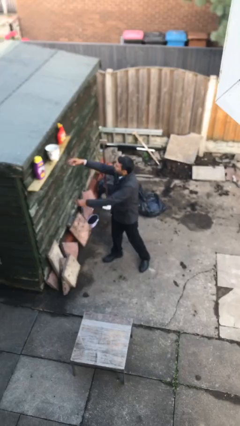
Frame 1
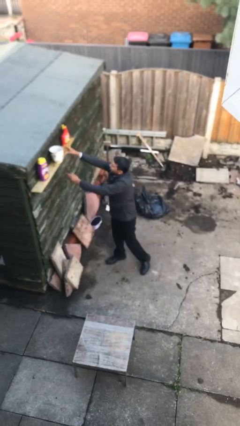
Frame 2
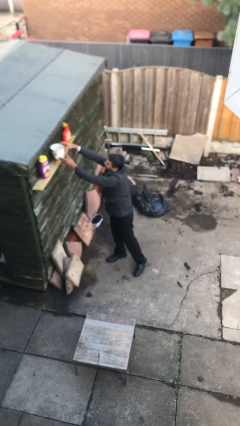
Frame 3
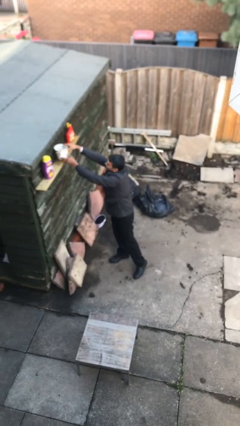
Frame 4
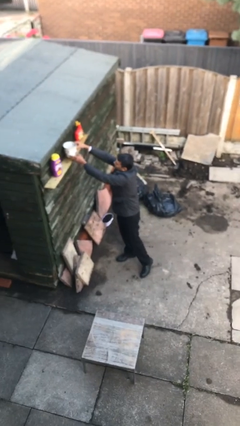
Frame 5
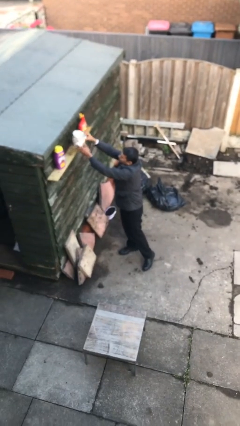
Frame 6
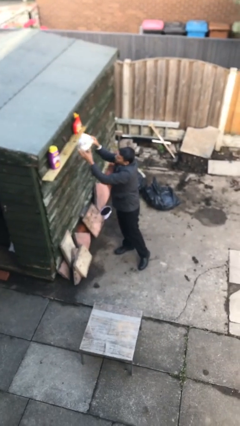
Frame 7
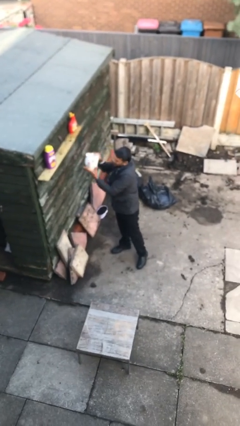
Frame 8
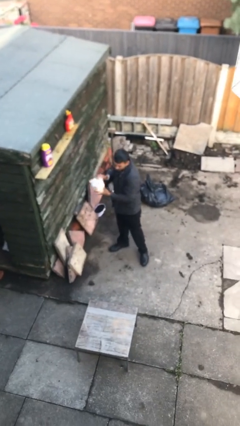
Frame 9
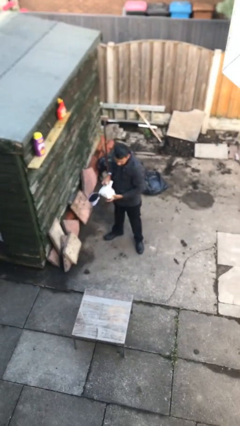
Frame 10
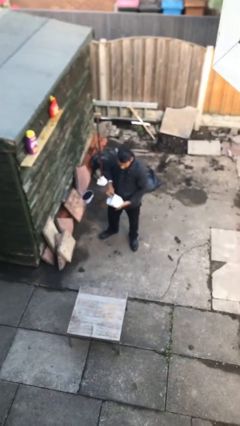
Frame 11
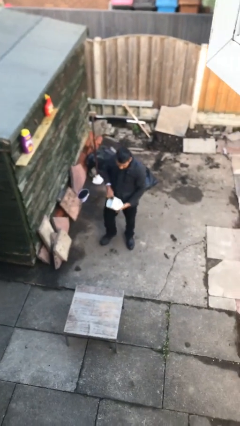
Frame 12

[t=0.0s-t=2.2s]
person picks up object from shelf

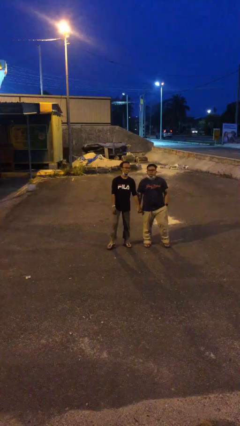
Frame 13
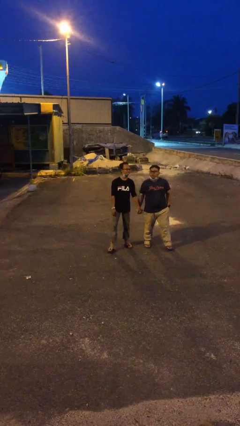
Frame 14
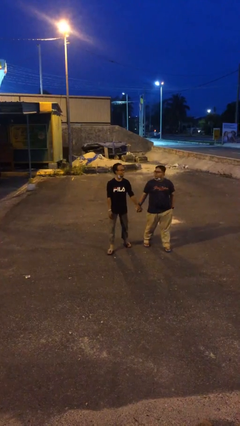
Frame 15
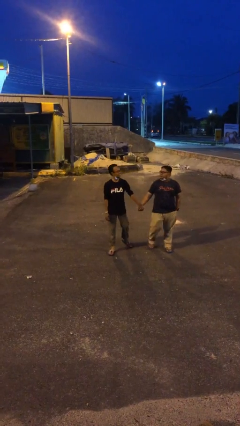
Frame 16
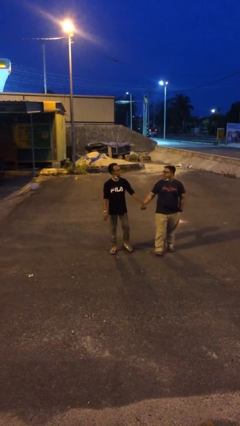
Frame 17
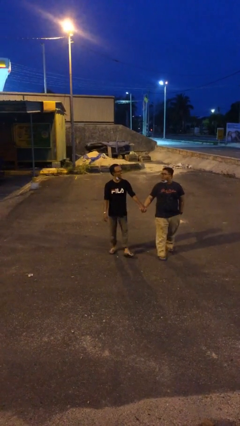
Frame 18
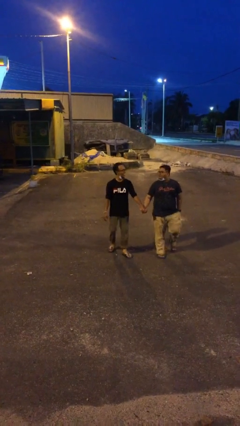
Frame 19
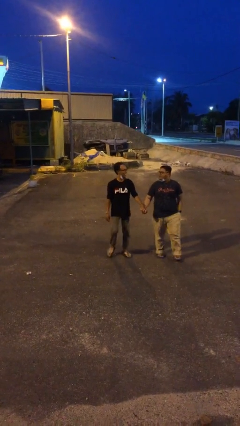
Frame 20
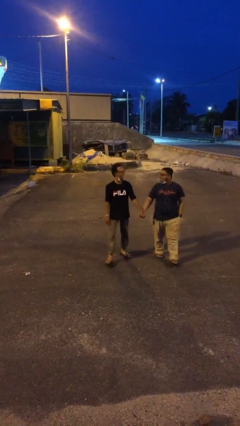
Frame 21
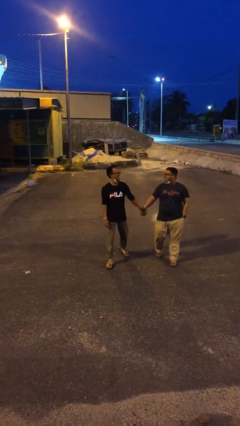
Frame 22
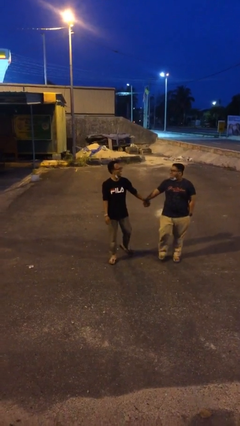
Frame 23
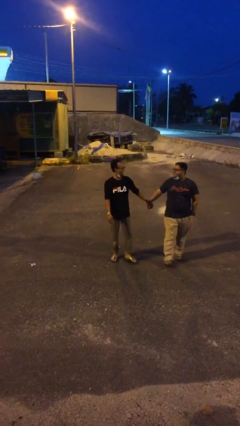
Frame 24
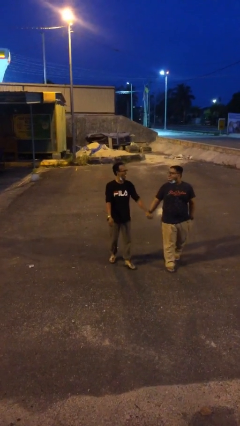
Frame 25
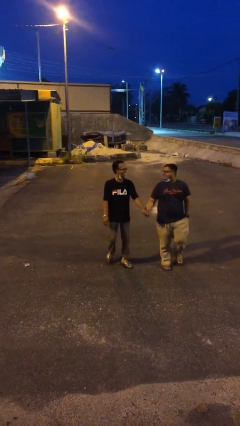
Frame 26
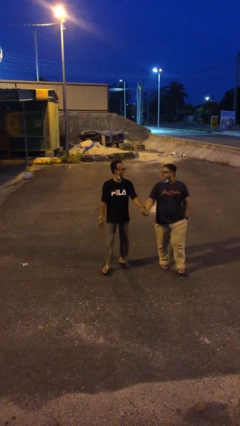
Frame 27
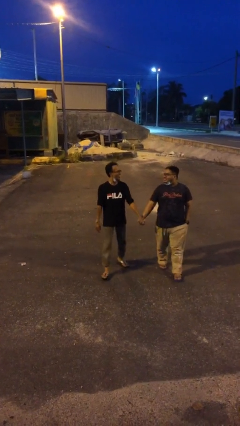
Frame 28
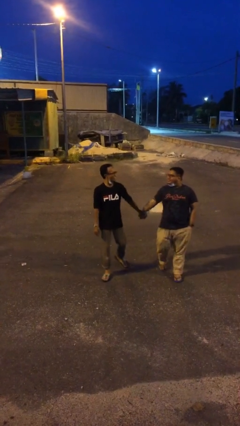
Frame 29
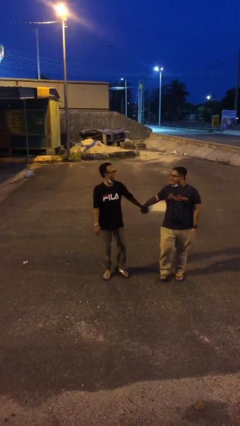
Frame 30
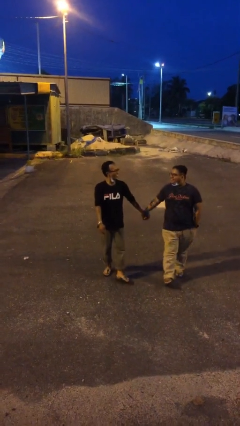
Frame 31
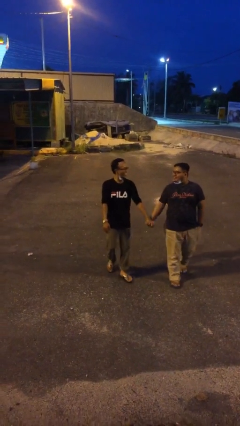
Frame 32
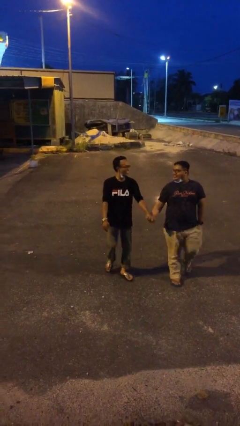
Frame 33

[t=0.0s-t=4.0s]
person holds hand

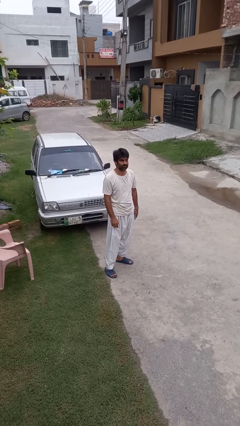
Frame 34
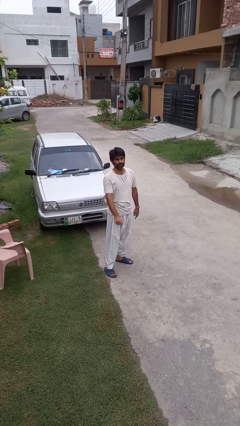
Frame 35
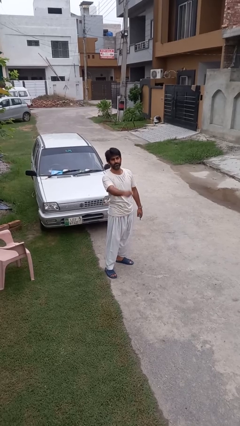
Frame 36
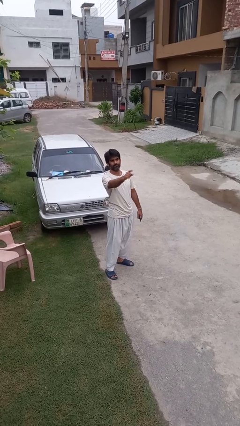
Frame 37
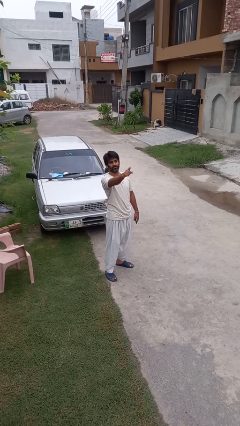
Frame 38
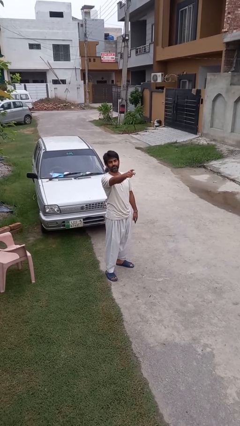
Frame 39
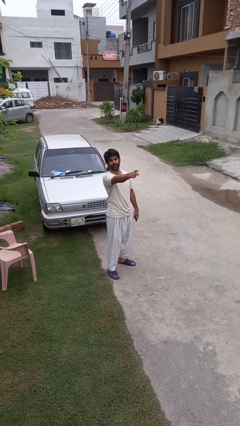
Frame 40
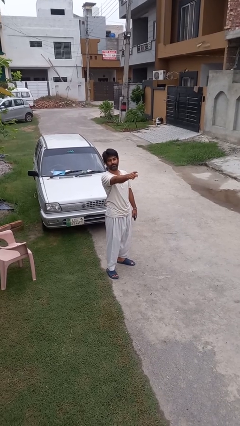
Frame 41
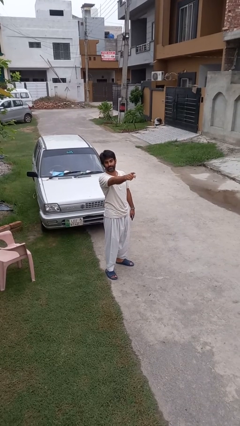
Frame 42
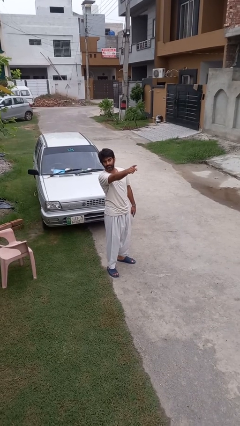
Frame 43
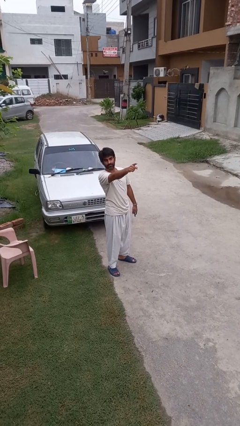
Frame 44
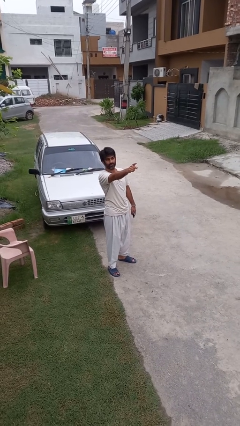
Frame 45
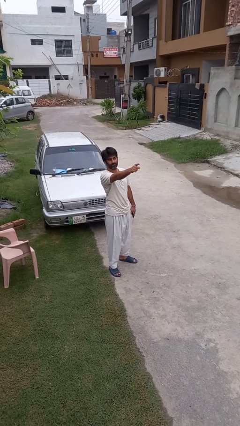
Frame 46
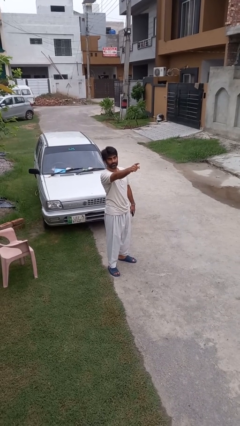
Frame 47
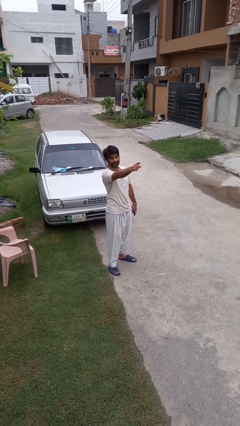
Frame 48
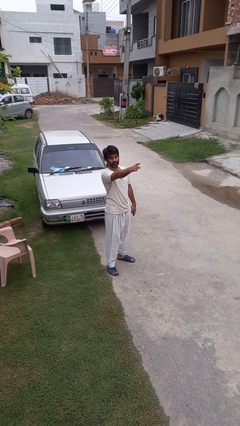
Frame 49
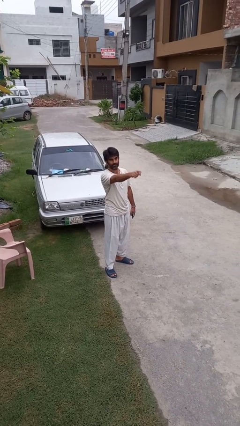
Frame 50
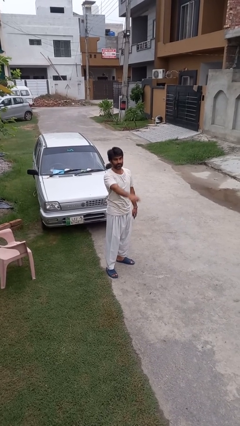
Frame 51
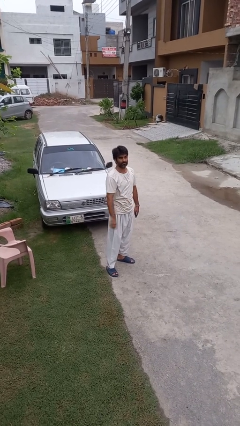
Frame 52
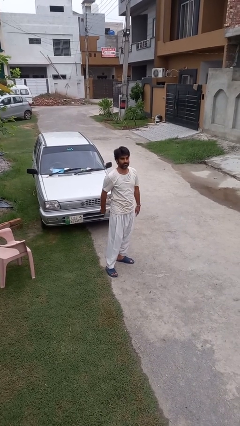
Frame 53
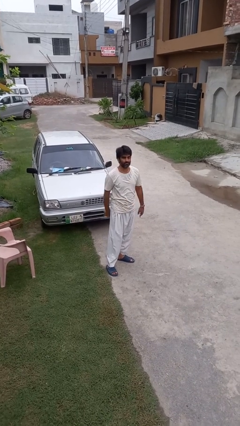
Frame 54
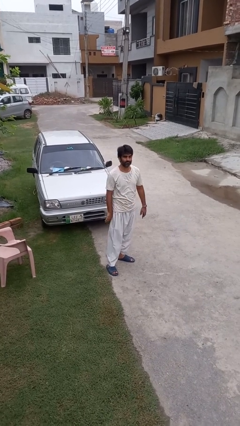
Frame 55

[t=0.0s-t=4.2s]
person points at person

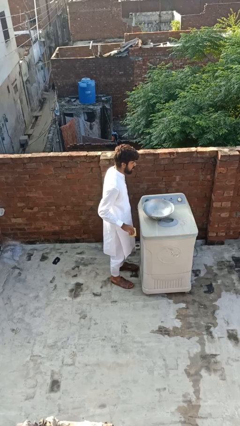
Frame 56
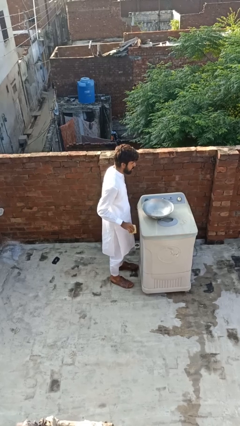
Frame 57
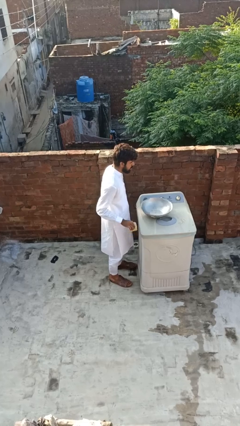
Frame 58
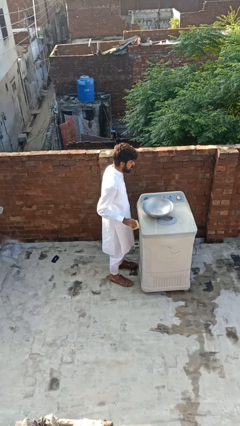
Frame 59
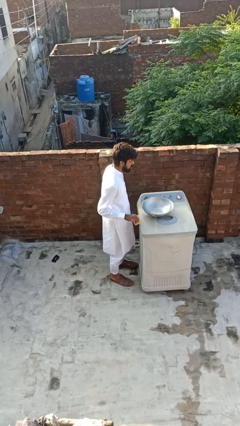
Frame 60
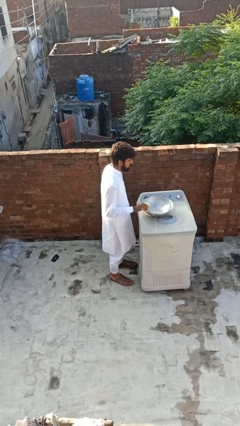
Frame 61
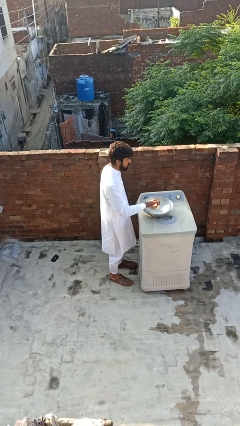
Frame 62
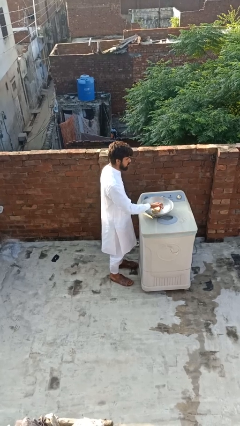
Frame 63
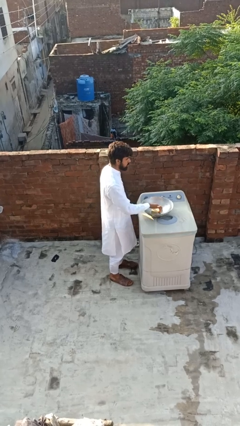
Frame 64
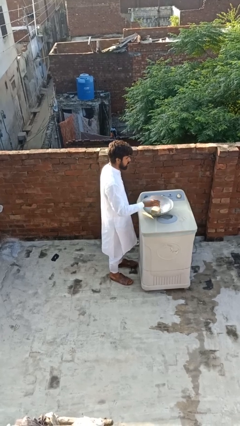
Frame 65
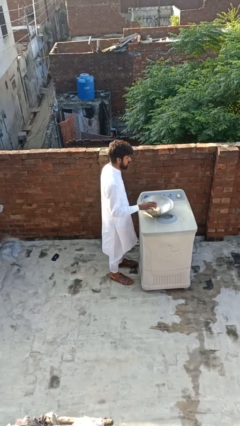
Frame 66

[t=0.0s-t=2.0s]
person pours into bowl

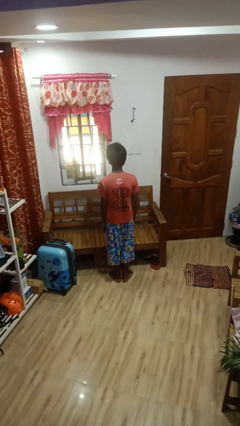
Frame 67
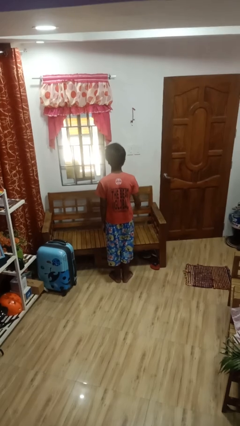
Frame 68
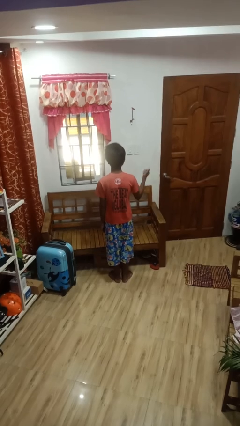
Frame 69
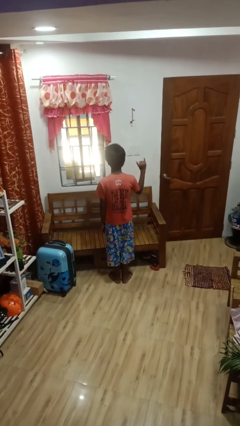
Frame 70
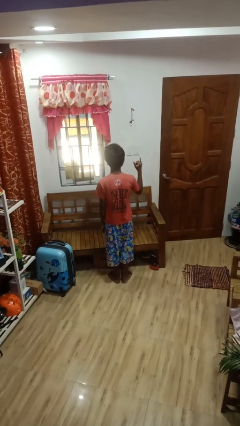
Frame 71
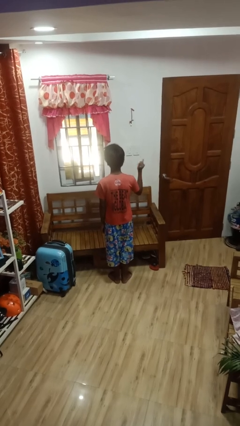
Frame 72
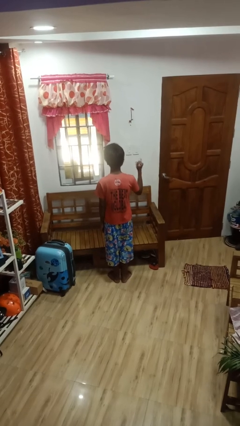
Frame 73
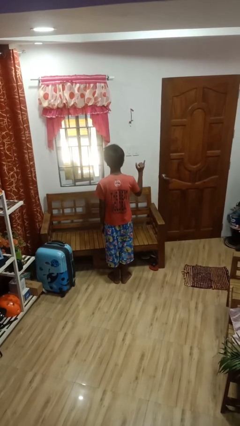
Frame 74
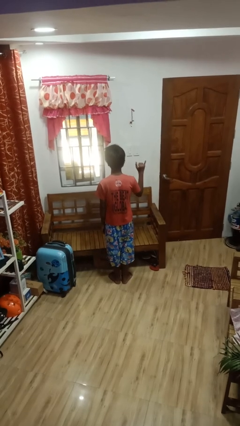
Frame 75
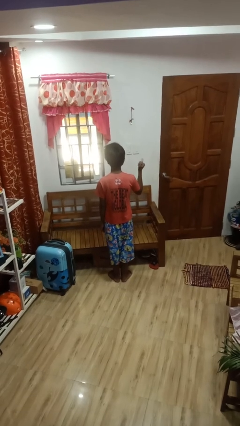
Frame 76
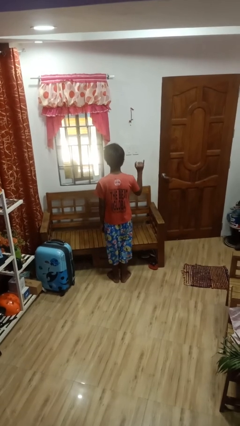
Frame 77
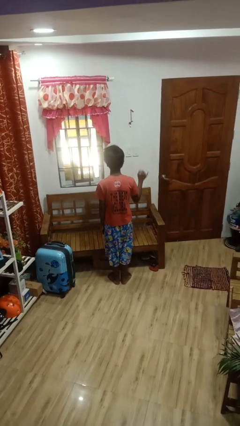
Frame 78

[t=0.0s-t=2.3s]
person gestures hang loose

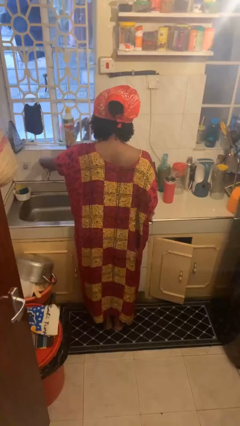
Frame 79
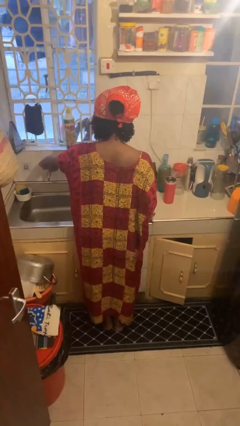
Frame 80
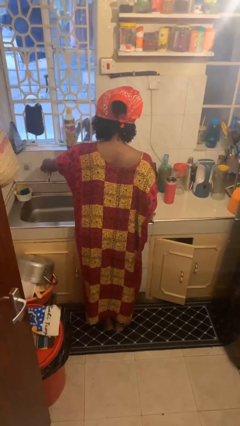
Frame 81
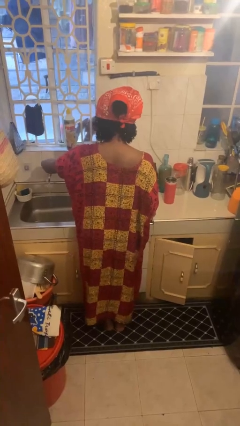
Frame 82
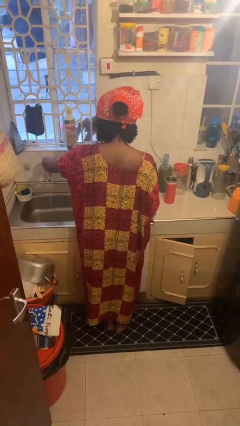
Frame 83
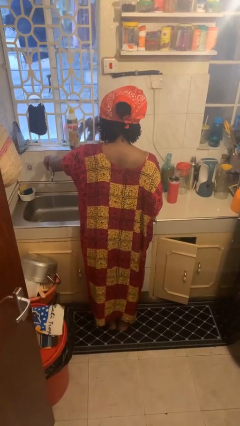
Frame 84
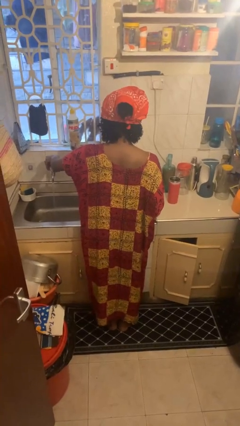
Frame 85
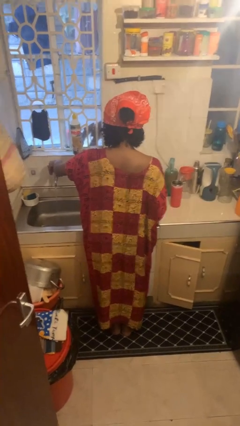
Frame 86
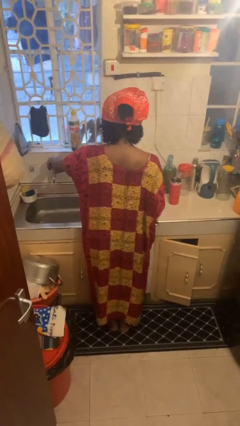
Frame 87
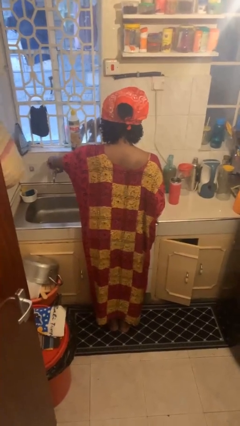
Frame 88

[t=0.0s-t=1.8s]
person turns on faucet

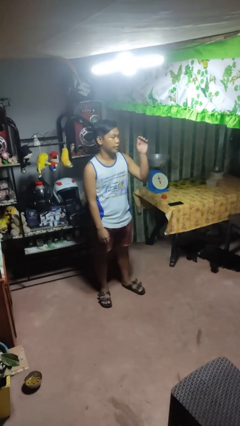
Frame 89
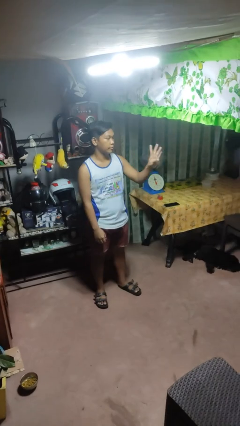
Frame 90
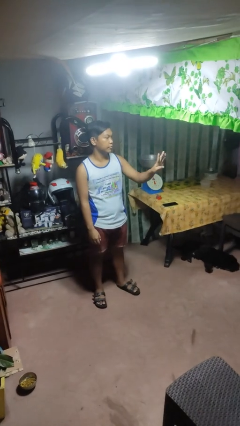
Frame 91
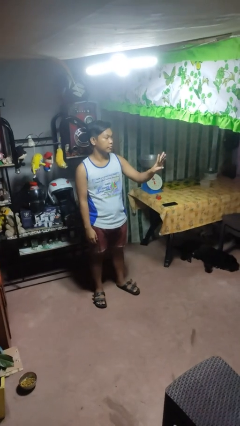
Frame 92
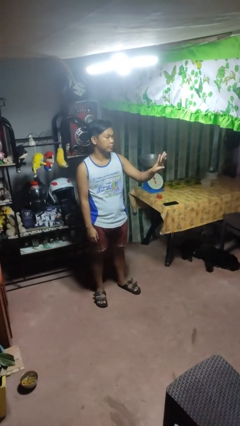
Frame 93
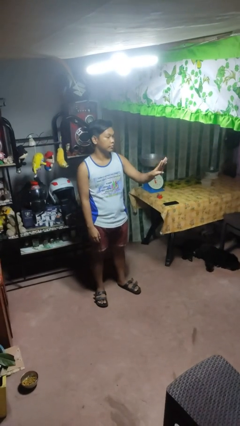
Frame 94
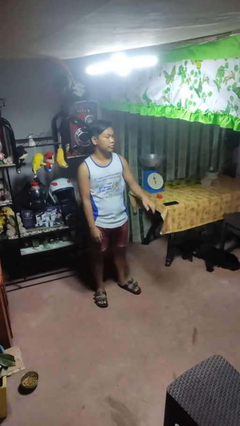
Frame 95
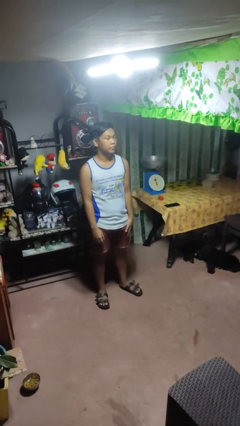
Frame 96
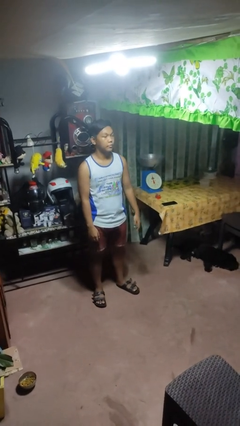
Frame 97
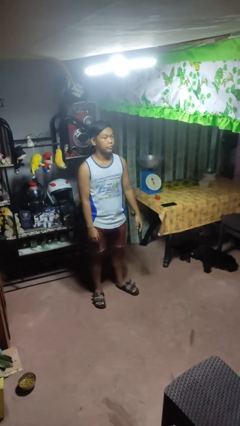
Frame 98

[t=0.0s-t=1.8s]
person gestures number four
